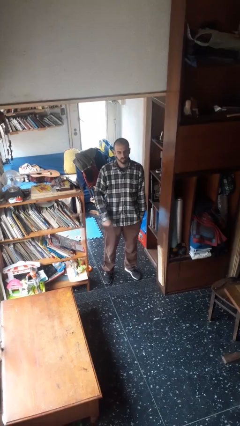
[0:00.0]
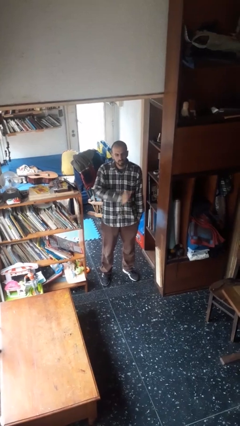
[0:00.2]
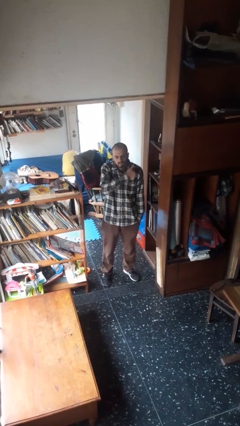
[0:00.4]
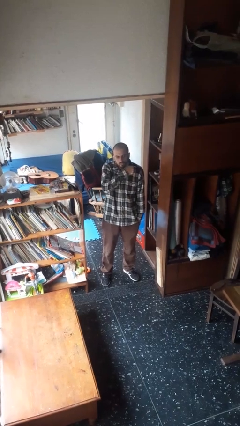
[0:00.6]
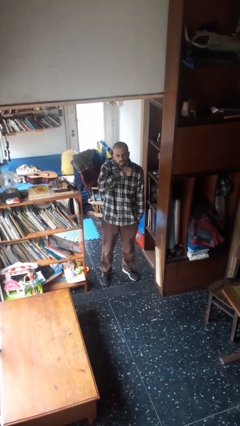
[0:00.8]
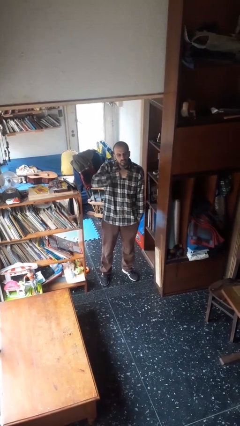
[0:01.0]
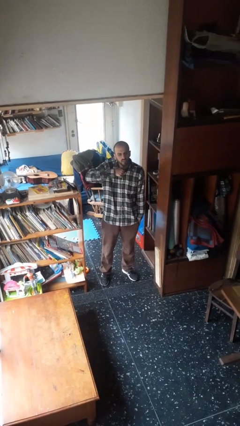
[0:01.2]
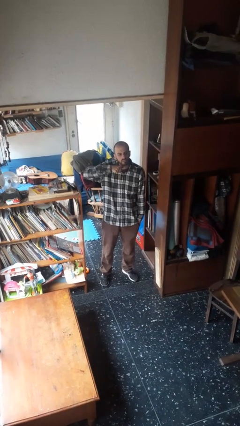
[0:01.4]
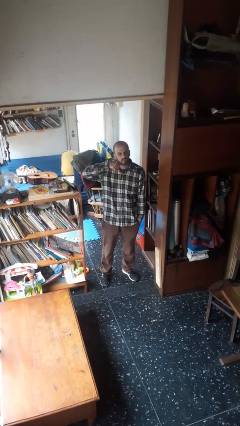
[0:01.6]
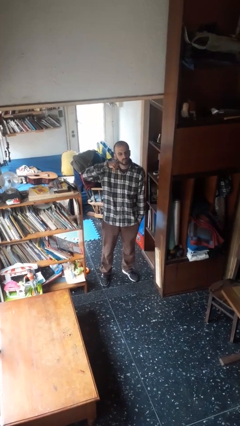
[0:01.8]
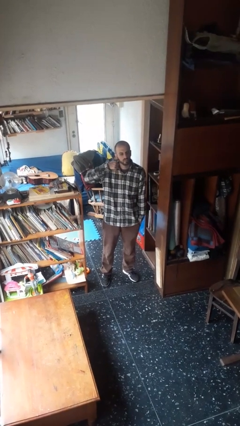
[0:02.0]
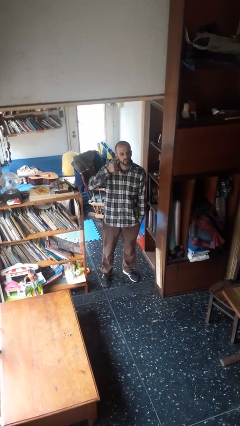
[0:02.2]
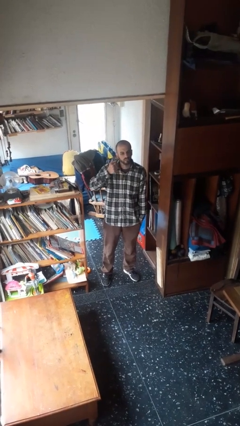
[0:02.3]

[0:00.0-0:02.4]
person gestures cut

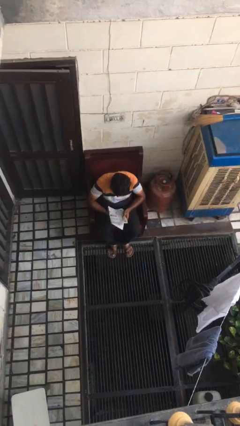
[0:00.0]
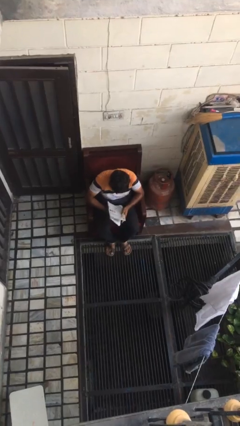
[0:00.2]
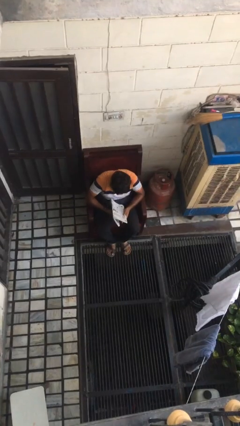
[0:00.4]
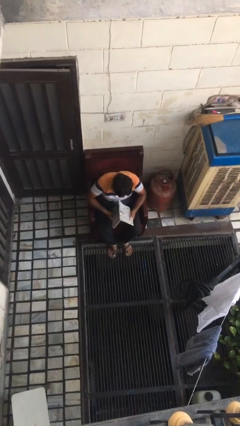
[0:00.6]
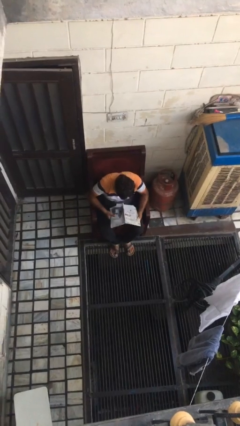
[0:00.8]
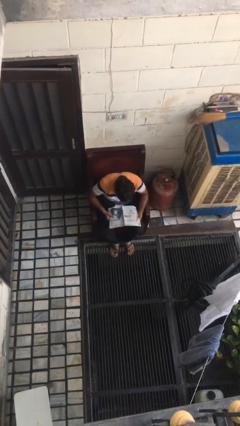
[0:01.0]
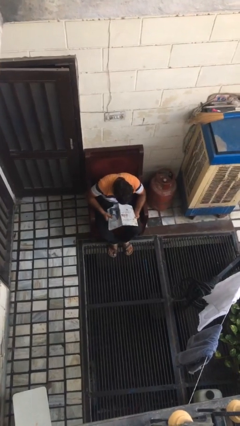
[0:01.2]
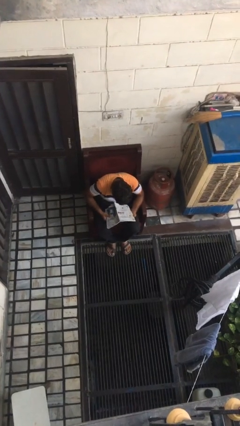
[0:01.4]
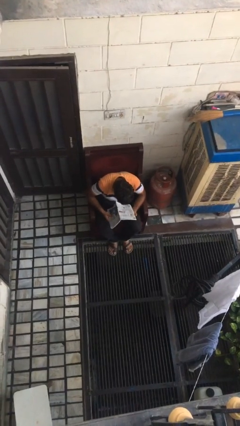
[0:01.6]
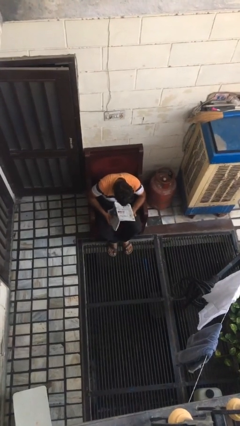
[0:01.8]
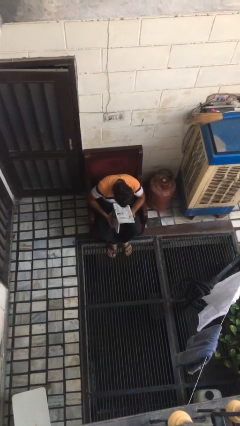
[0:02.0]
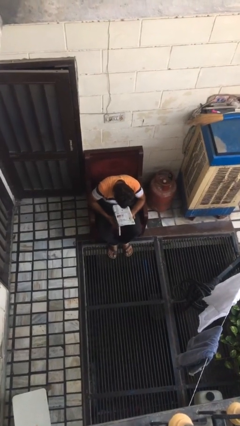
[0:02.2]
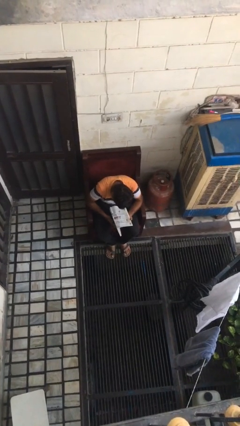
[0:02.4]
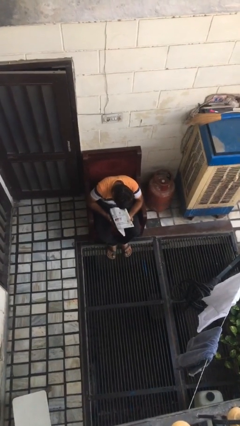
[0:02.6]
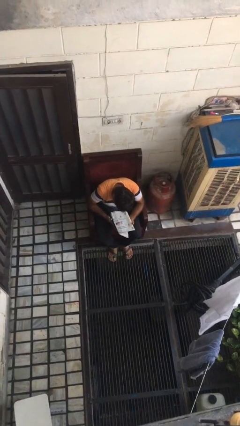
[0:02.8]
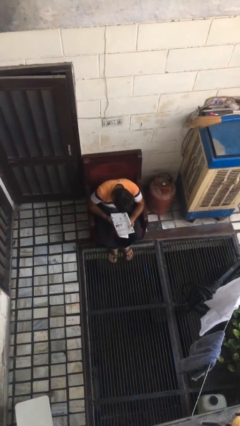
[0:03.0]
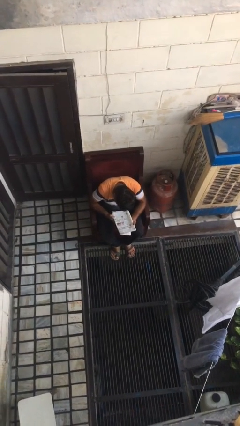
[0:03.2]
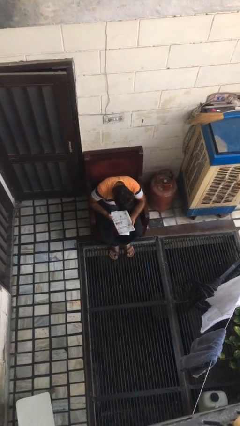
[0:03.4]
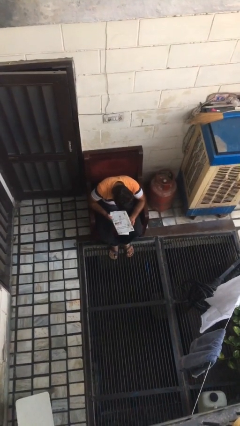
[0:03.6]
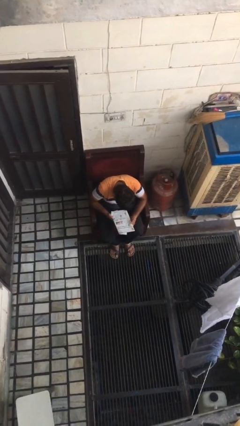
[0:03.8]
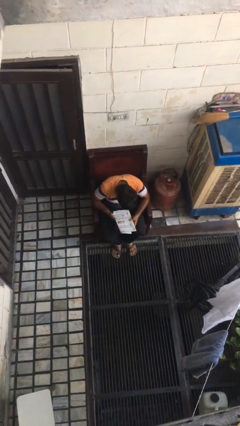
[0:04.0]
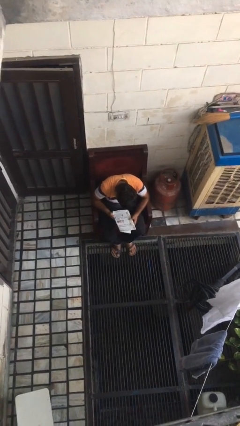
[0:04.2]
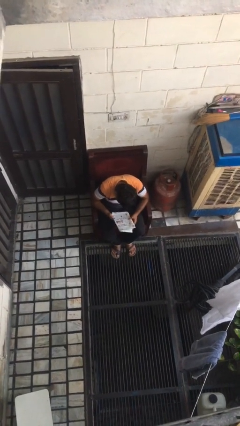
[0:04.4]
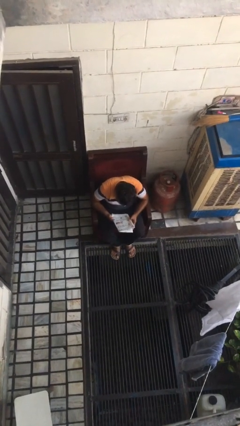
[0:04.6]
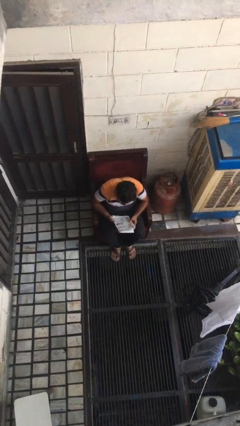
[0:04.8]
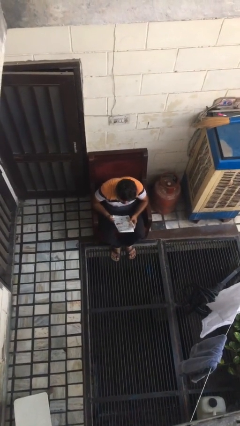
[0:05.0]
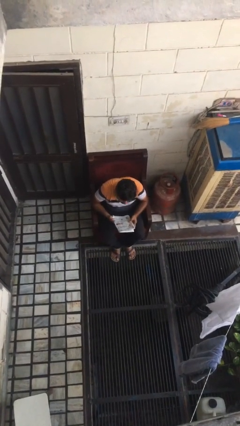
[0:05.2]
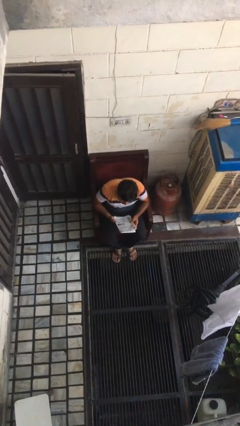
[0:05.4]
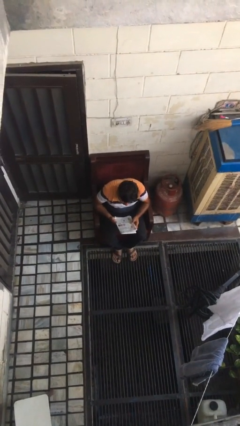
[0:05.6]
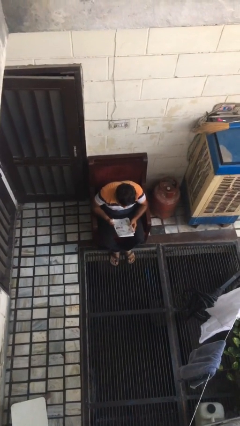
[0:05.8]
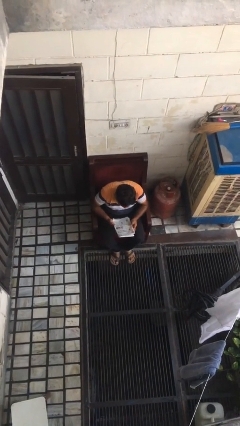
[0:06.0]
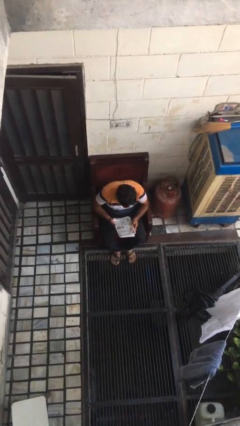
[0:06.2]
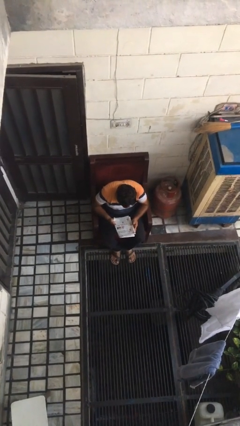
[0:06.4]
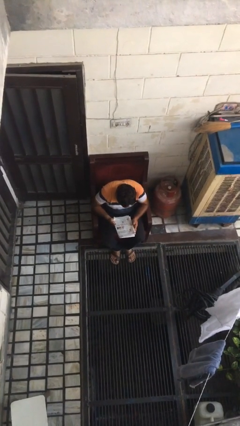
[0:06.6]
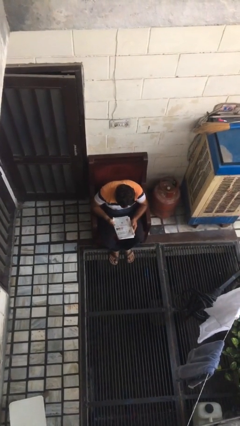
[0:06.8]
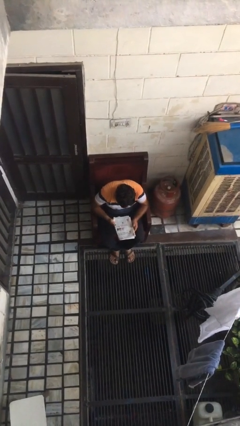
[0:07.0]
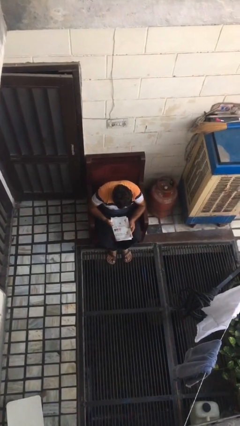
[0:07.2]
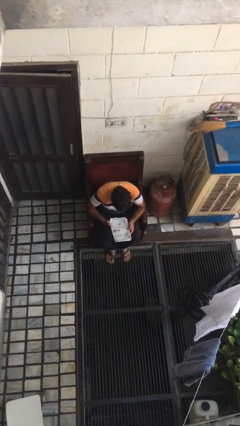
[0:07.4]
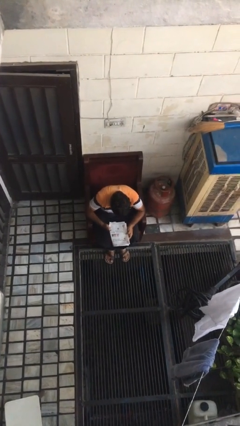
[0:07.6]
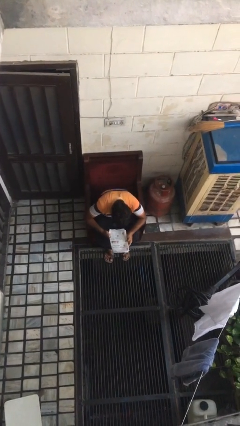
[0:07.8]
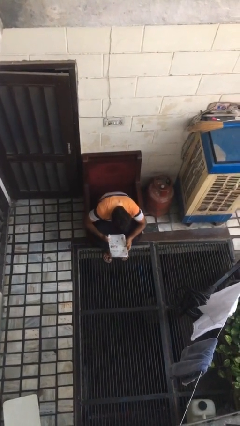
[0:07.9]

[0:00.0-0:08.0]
person reads document

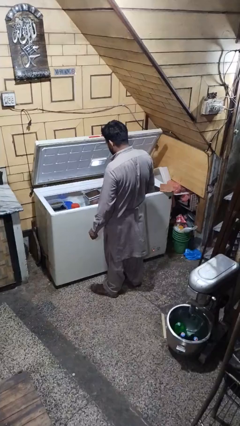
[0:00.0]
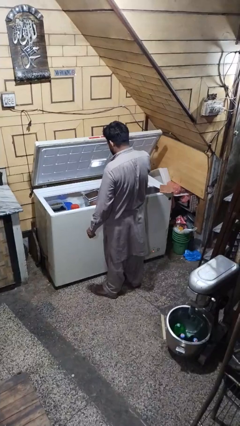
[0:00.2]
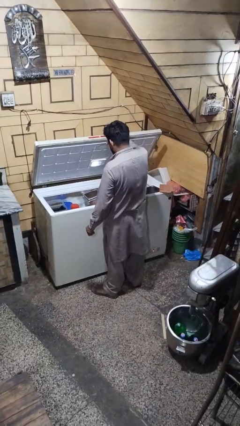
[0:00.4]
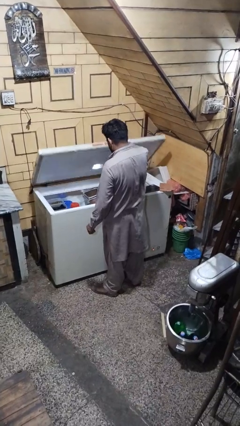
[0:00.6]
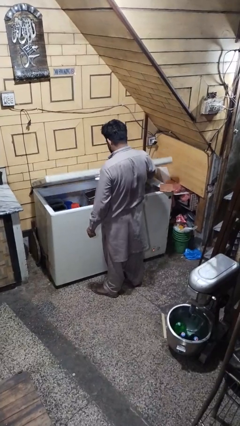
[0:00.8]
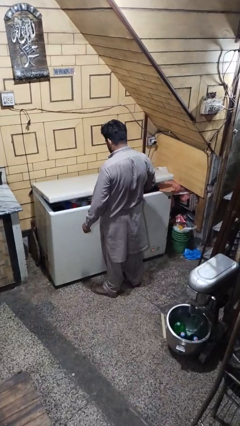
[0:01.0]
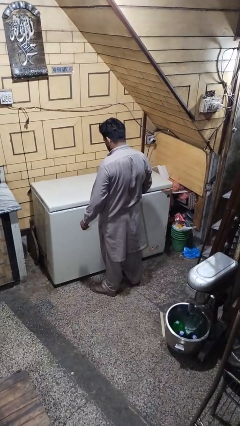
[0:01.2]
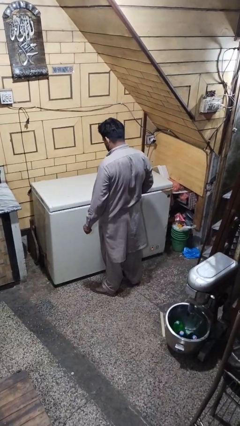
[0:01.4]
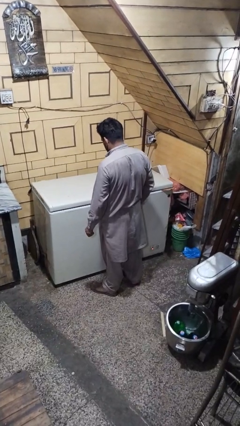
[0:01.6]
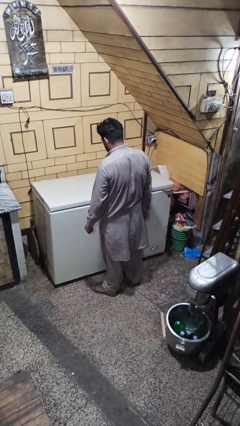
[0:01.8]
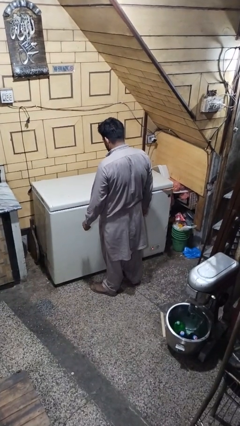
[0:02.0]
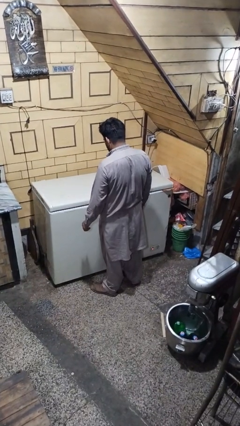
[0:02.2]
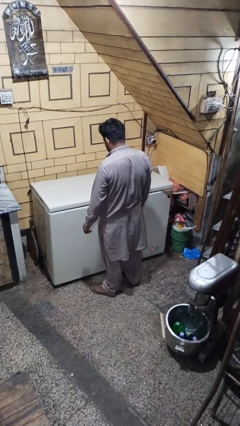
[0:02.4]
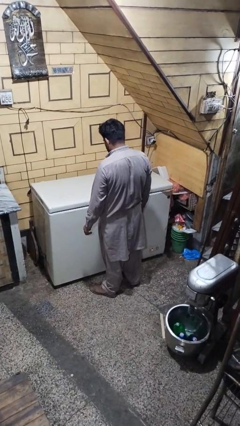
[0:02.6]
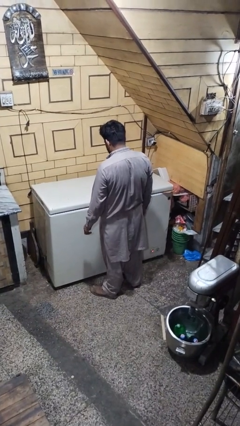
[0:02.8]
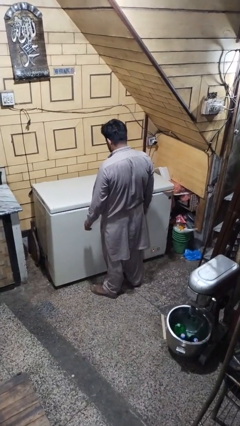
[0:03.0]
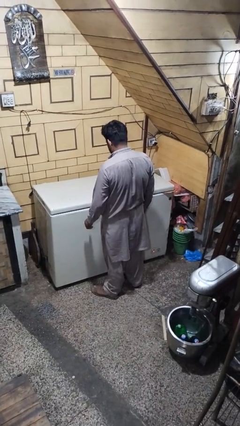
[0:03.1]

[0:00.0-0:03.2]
person closes refrigerator

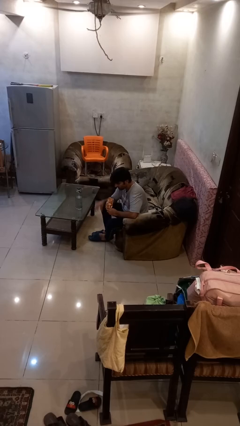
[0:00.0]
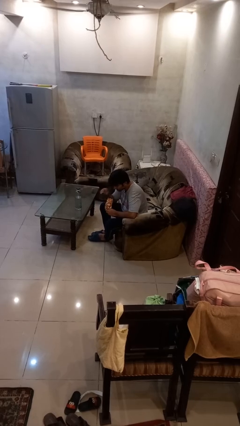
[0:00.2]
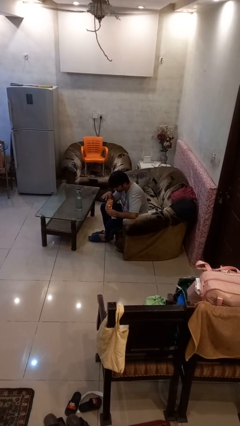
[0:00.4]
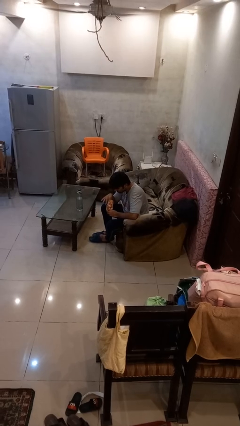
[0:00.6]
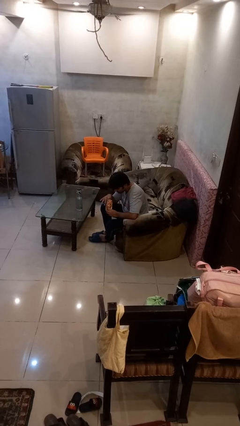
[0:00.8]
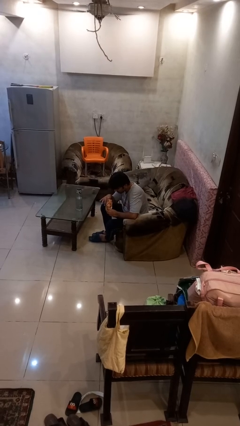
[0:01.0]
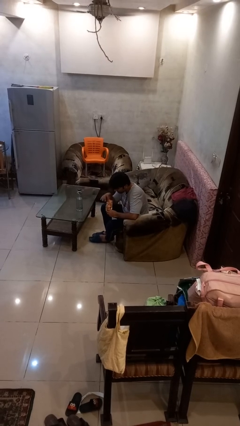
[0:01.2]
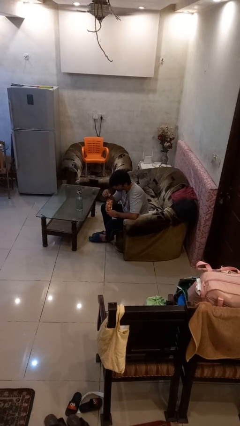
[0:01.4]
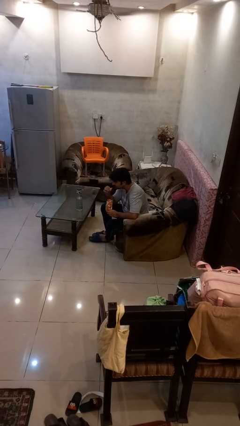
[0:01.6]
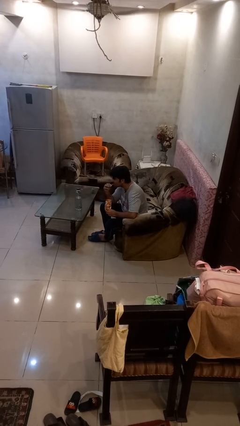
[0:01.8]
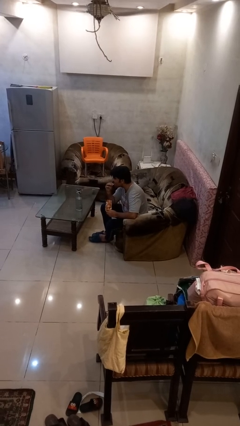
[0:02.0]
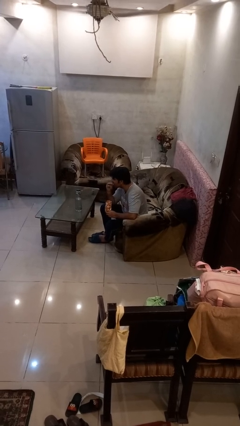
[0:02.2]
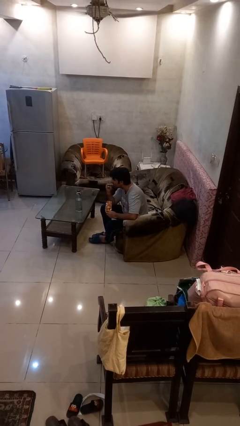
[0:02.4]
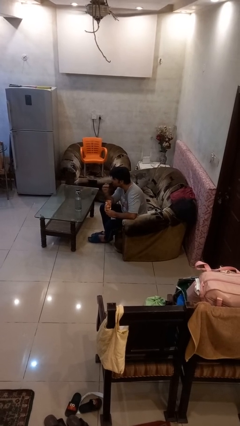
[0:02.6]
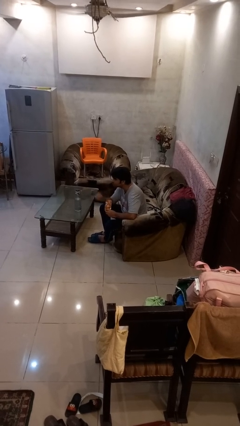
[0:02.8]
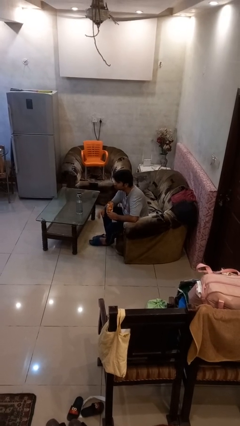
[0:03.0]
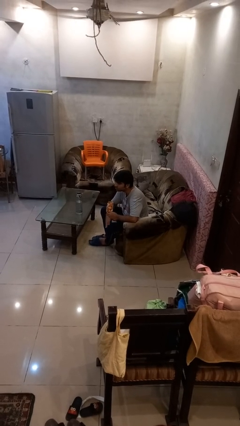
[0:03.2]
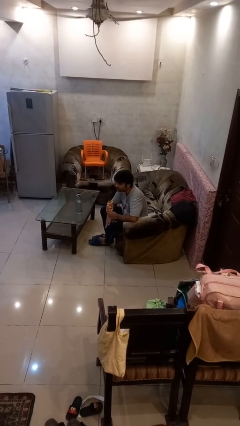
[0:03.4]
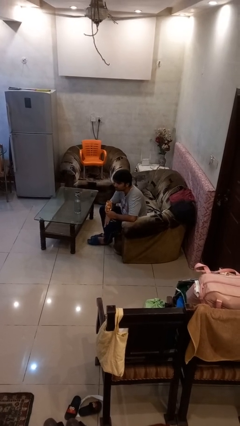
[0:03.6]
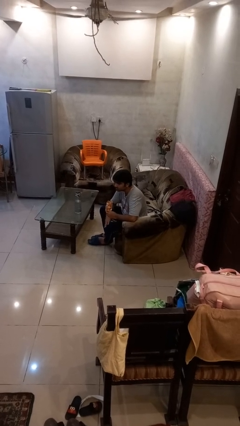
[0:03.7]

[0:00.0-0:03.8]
person eats snack from bag

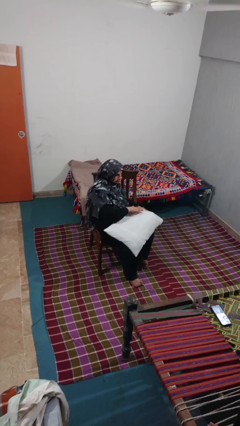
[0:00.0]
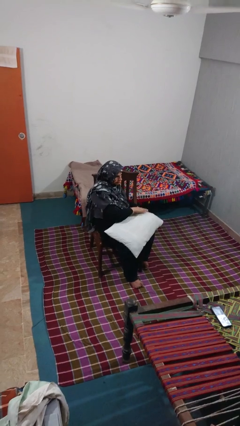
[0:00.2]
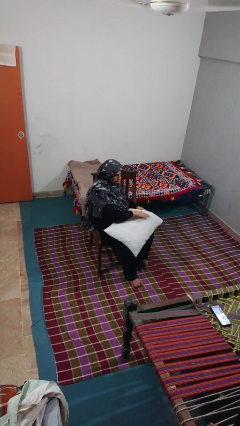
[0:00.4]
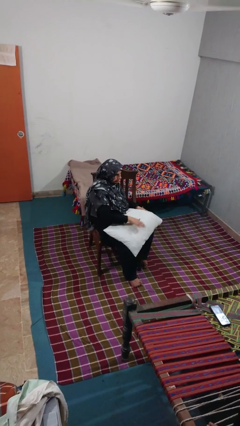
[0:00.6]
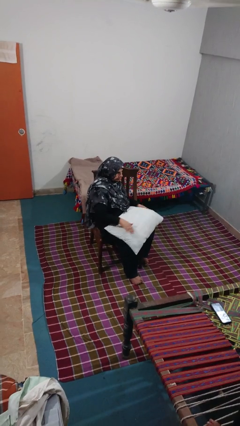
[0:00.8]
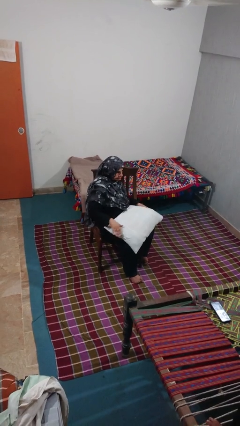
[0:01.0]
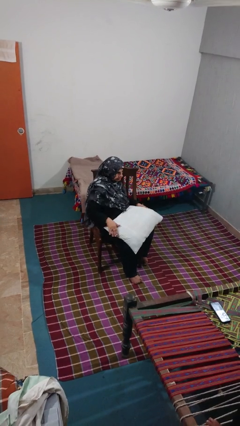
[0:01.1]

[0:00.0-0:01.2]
person waves hand over object
